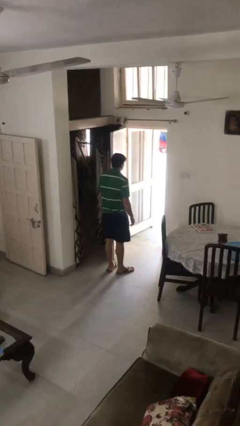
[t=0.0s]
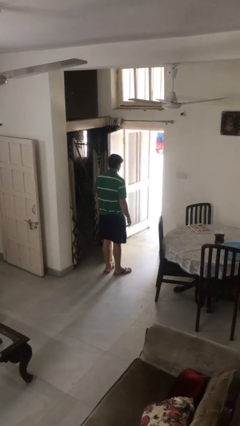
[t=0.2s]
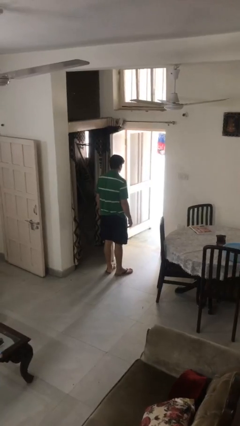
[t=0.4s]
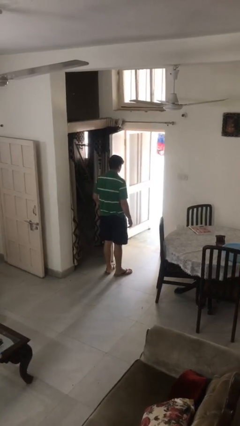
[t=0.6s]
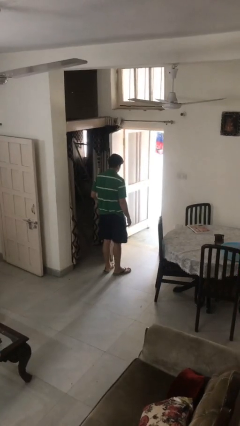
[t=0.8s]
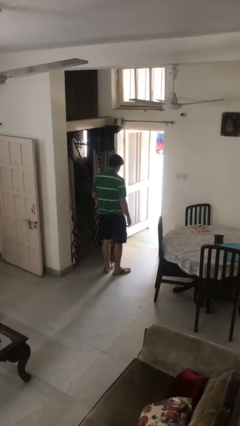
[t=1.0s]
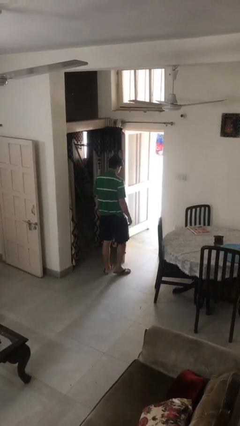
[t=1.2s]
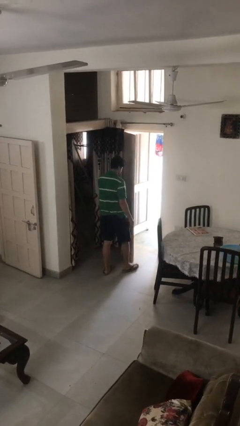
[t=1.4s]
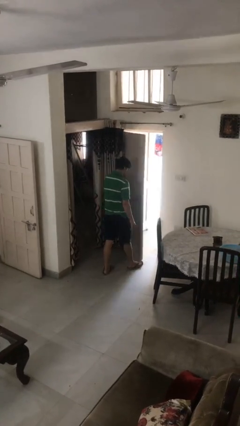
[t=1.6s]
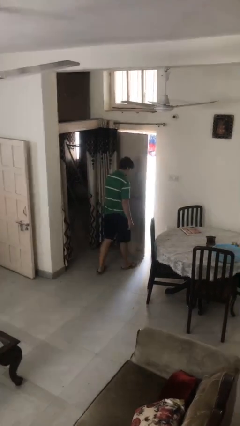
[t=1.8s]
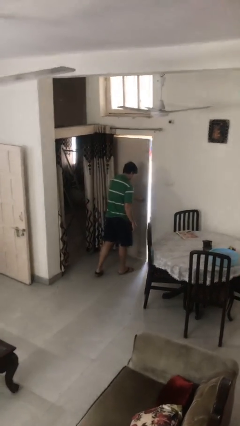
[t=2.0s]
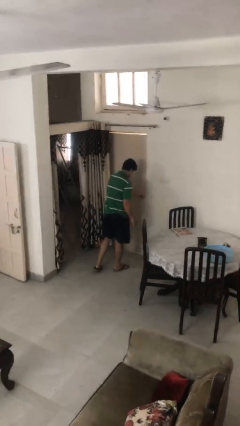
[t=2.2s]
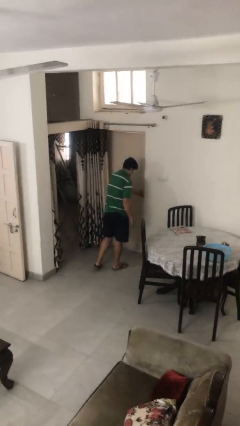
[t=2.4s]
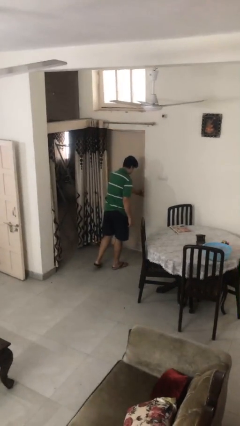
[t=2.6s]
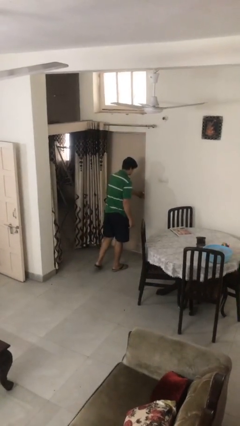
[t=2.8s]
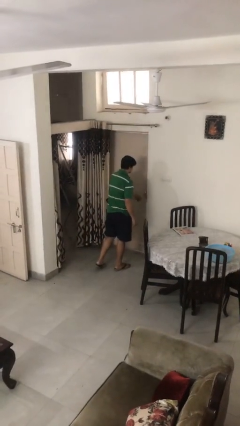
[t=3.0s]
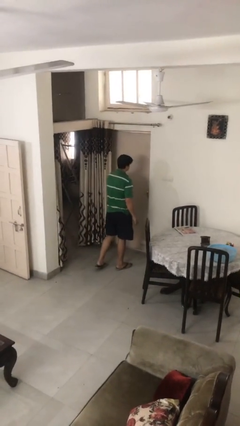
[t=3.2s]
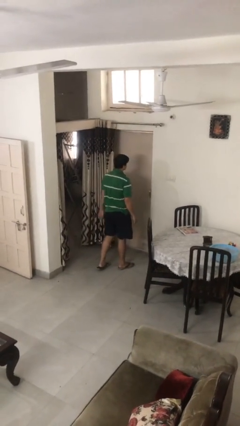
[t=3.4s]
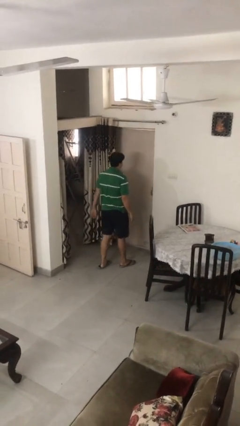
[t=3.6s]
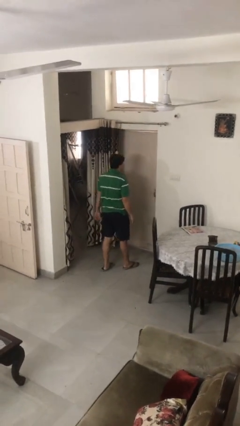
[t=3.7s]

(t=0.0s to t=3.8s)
person closes facility door

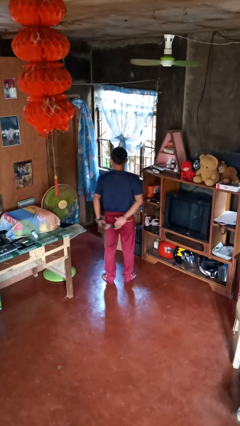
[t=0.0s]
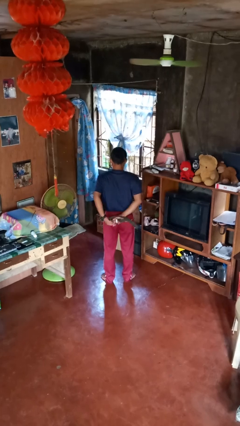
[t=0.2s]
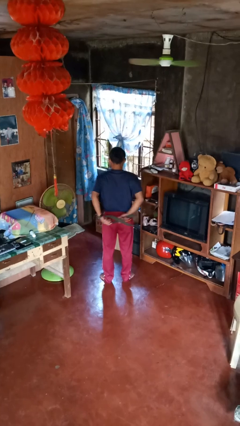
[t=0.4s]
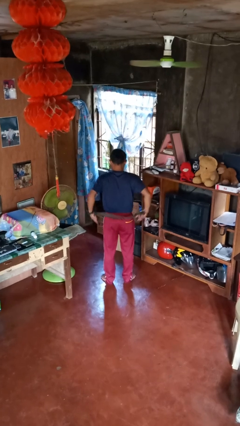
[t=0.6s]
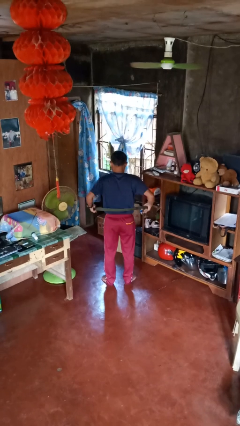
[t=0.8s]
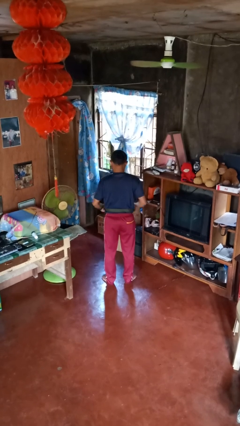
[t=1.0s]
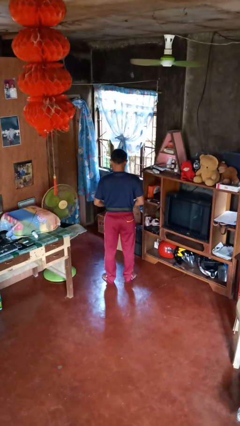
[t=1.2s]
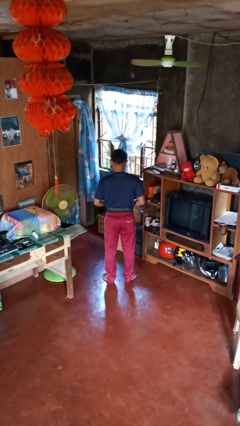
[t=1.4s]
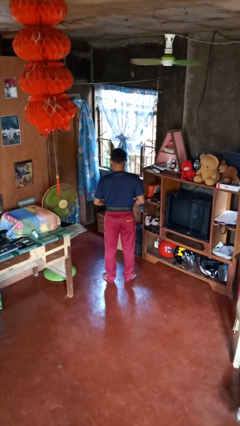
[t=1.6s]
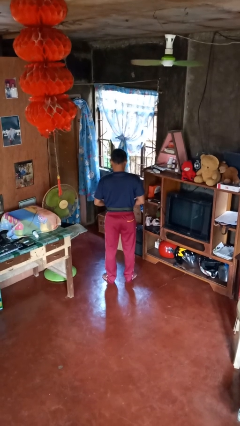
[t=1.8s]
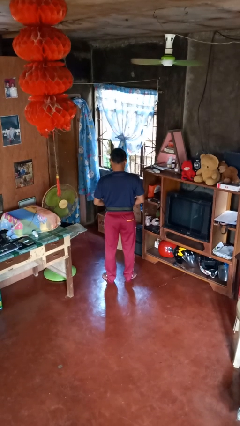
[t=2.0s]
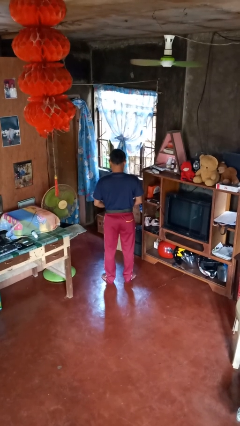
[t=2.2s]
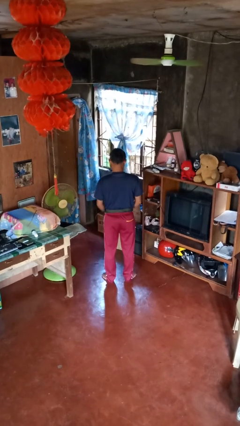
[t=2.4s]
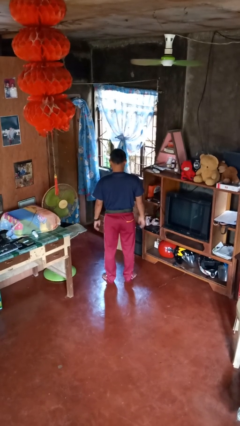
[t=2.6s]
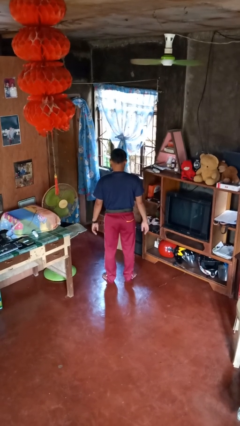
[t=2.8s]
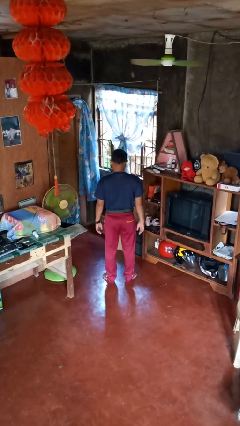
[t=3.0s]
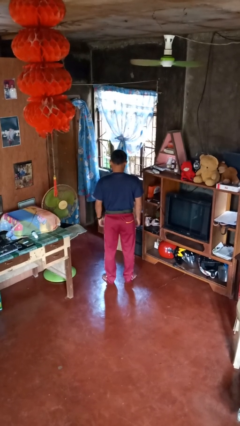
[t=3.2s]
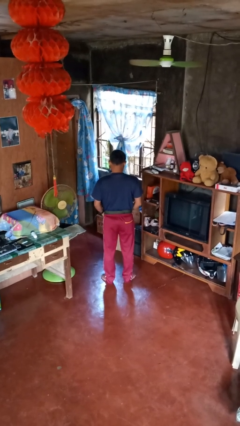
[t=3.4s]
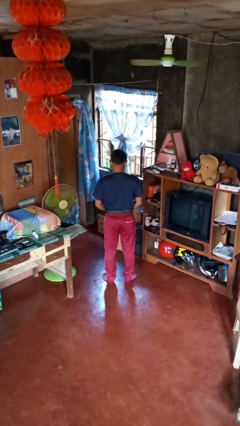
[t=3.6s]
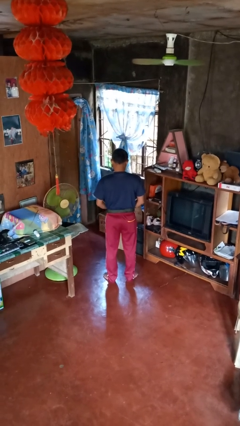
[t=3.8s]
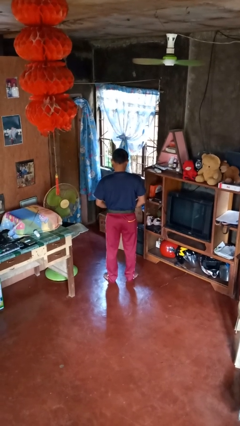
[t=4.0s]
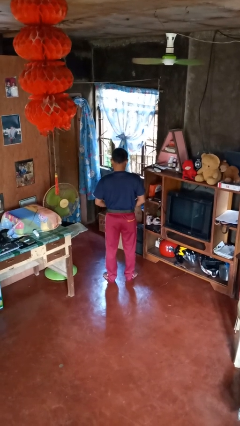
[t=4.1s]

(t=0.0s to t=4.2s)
person puts on belt

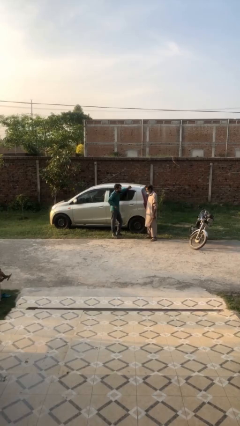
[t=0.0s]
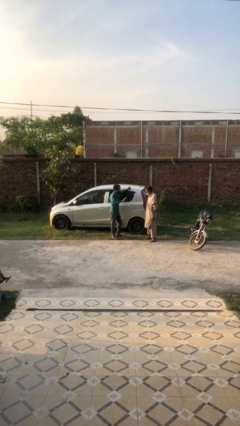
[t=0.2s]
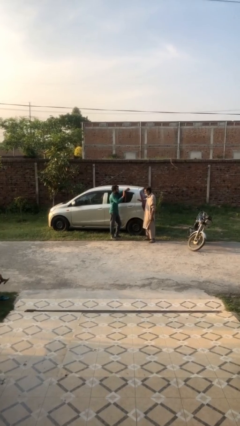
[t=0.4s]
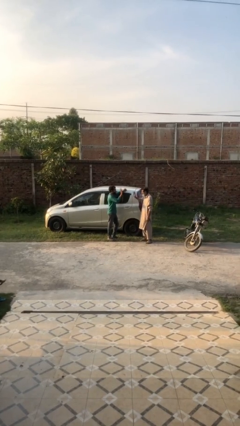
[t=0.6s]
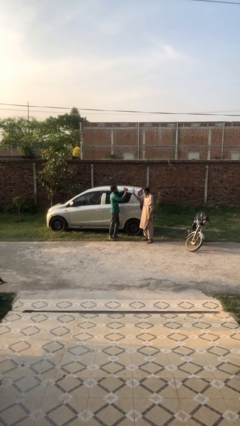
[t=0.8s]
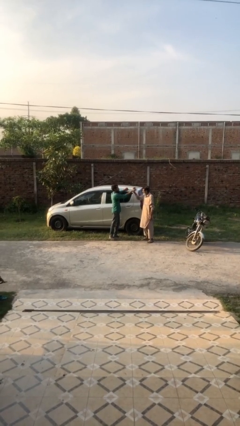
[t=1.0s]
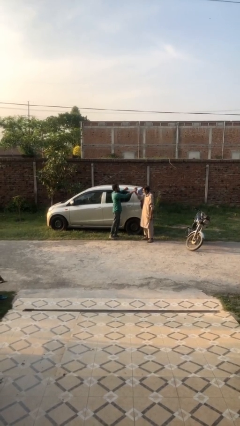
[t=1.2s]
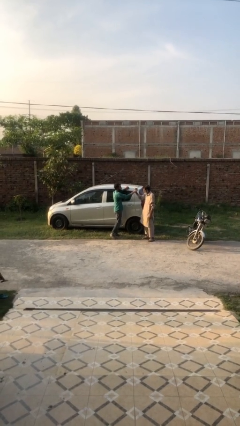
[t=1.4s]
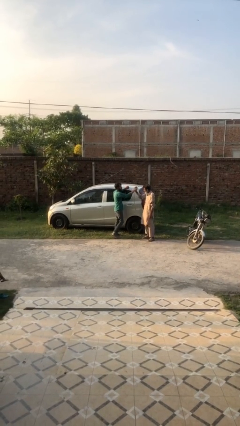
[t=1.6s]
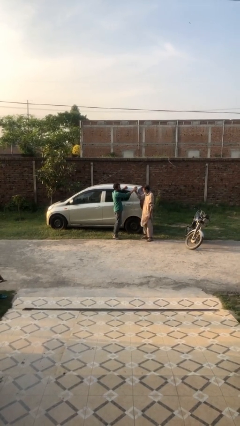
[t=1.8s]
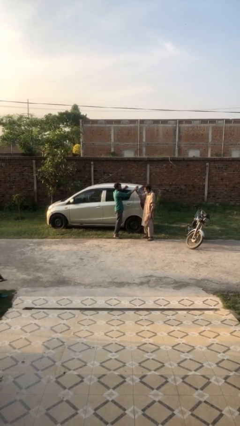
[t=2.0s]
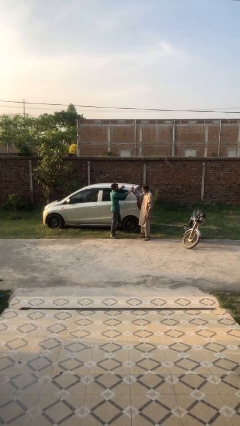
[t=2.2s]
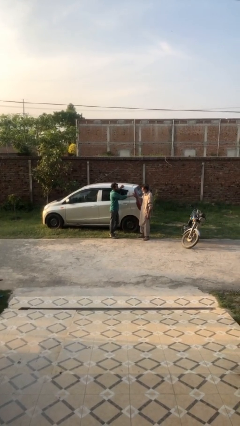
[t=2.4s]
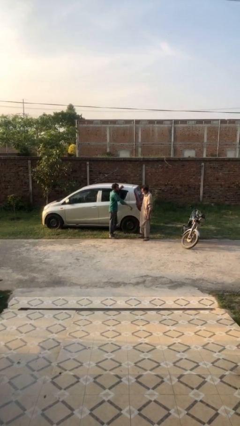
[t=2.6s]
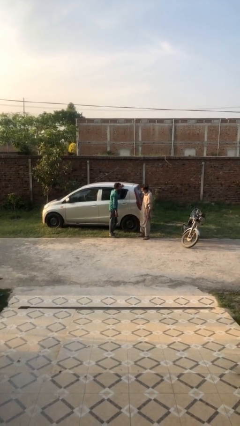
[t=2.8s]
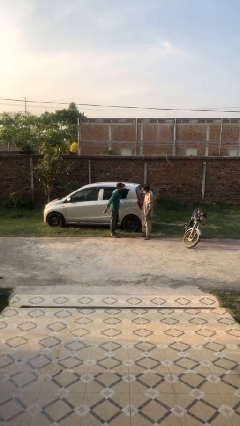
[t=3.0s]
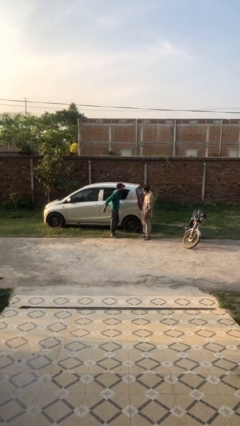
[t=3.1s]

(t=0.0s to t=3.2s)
person highfives hand

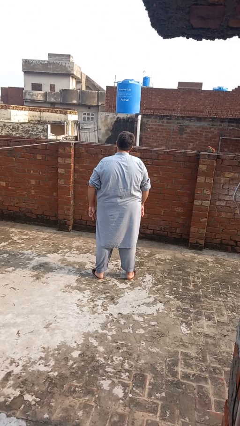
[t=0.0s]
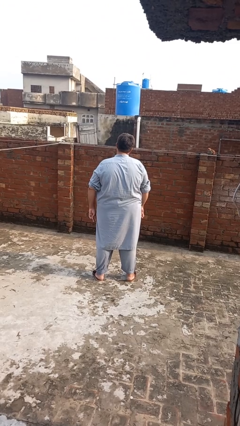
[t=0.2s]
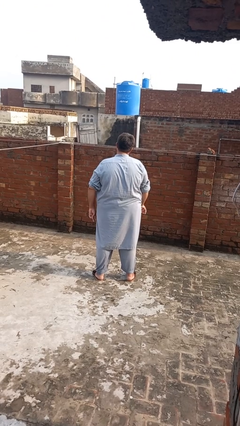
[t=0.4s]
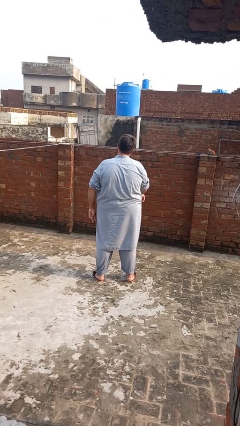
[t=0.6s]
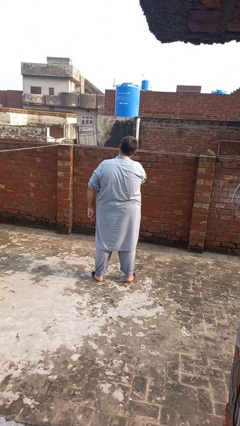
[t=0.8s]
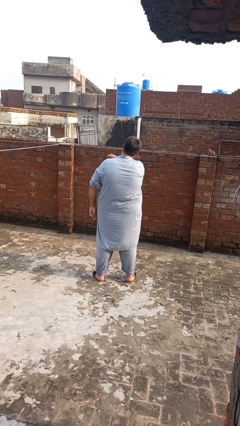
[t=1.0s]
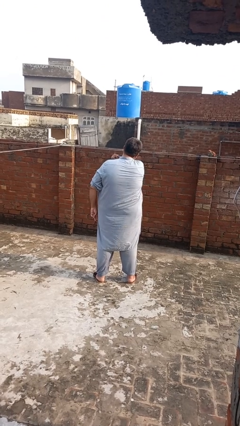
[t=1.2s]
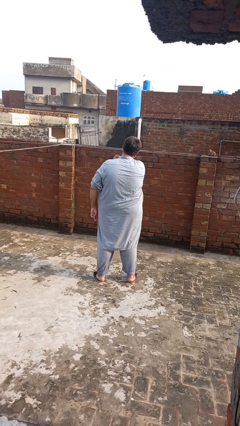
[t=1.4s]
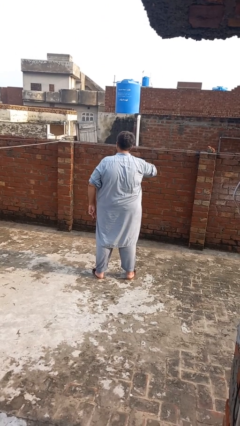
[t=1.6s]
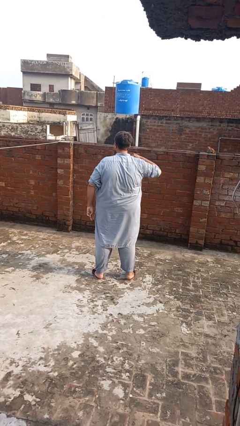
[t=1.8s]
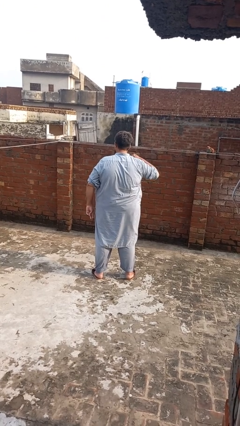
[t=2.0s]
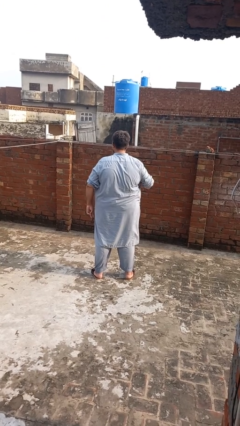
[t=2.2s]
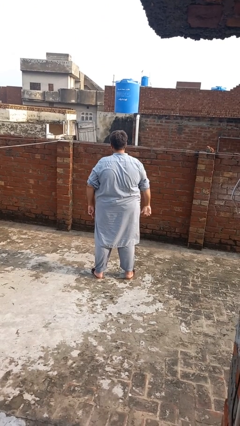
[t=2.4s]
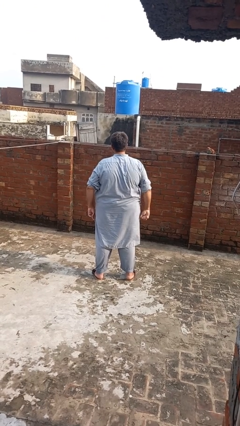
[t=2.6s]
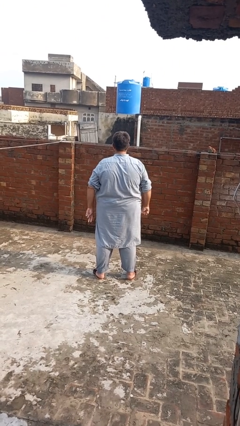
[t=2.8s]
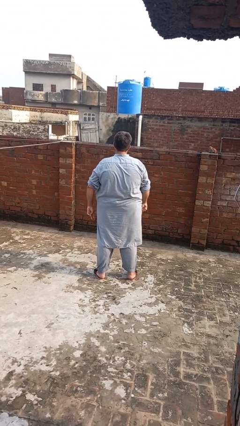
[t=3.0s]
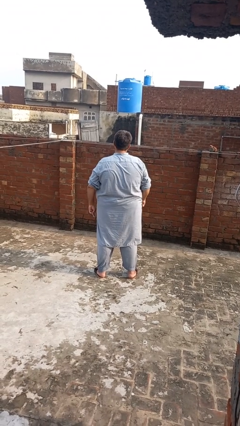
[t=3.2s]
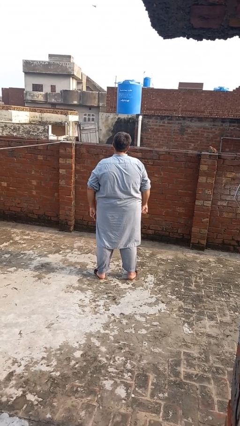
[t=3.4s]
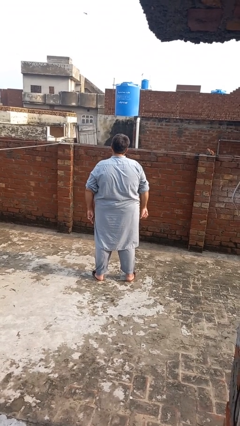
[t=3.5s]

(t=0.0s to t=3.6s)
person gestures cut

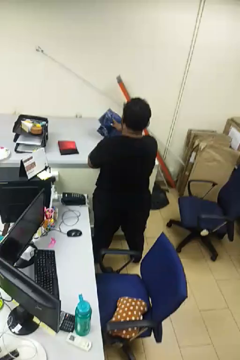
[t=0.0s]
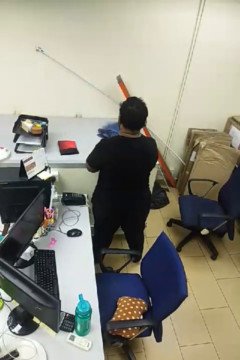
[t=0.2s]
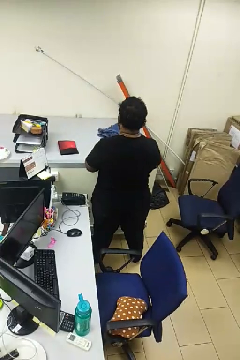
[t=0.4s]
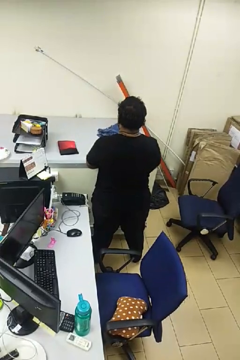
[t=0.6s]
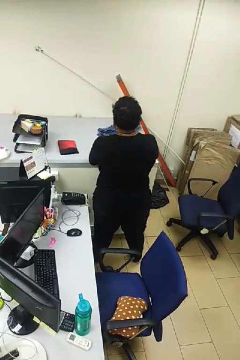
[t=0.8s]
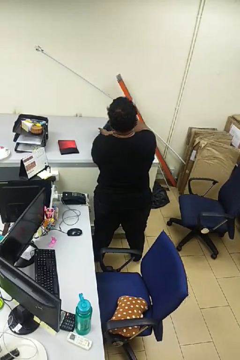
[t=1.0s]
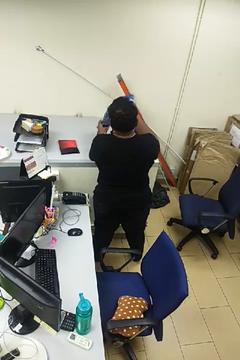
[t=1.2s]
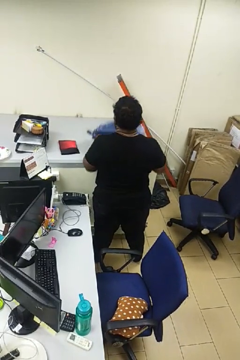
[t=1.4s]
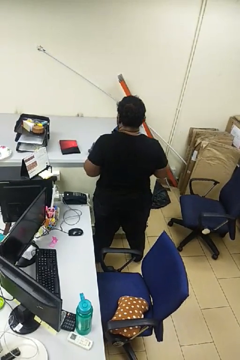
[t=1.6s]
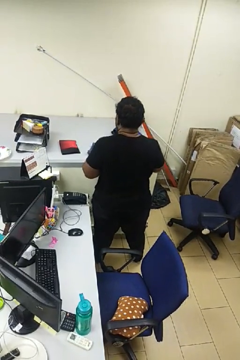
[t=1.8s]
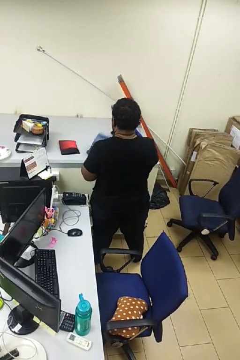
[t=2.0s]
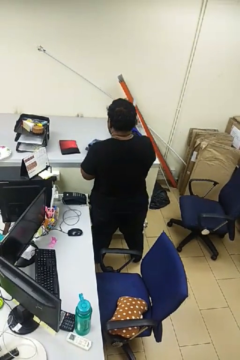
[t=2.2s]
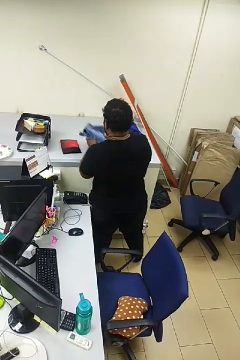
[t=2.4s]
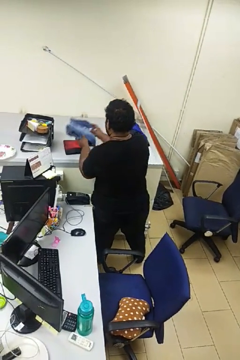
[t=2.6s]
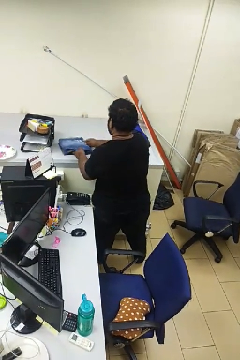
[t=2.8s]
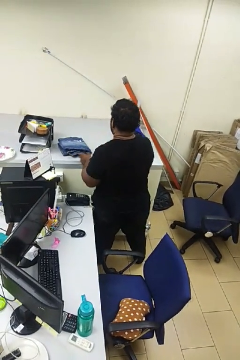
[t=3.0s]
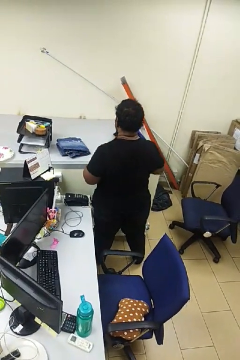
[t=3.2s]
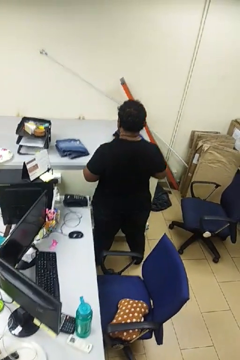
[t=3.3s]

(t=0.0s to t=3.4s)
person folds pants
